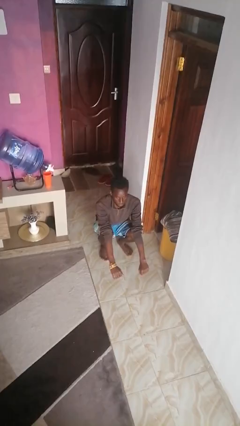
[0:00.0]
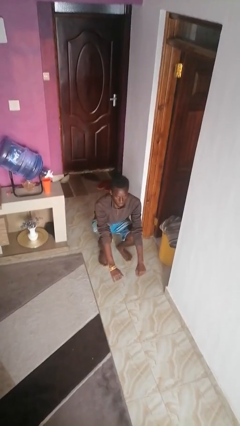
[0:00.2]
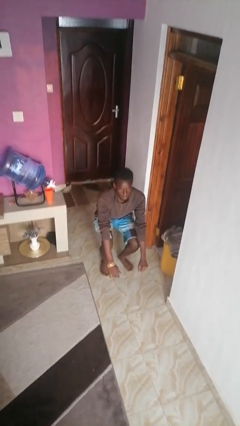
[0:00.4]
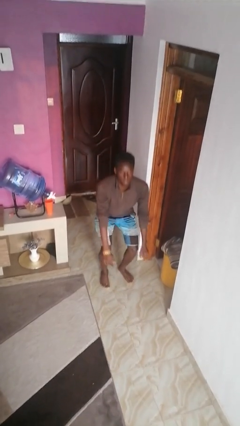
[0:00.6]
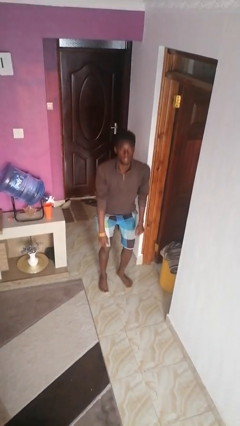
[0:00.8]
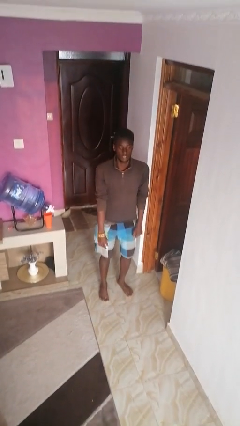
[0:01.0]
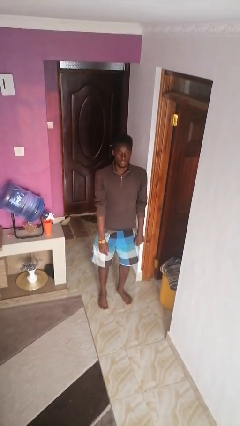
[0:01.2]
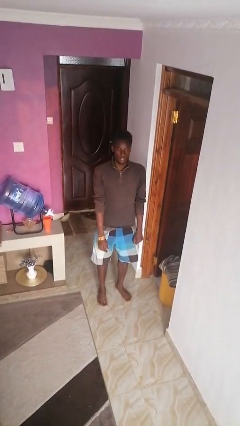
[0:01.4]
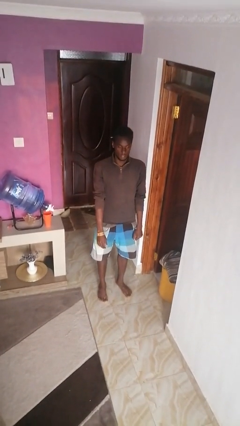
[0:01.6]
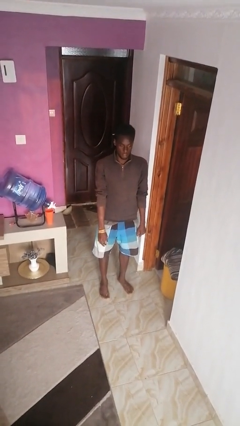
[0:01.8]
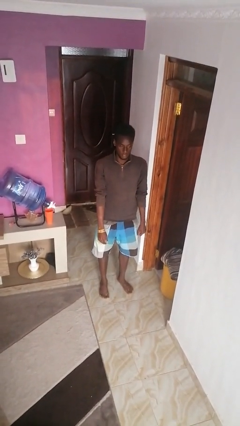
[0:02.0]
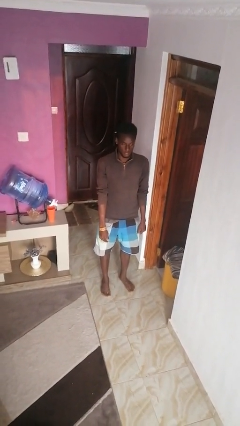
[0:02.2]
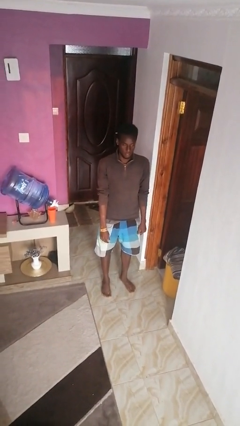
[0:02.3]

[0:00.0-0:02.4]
person stands up

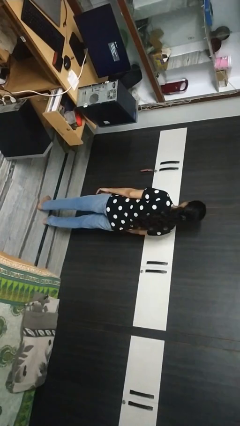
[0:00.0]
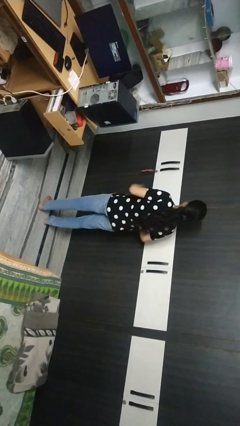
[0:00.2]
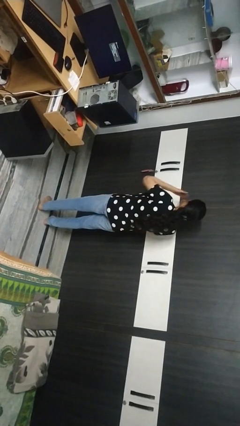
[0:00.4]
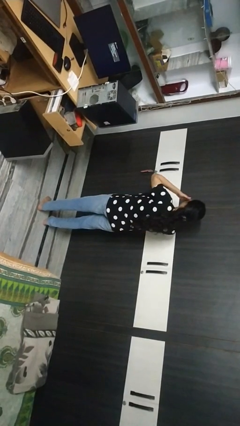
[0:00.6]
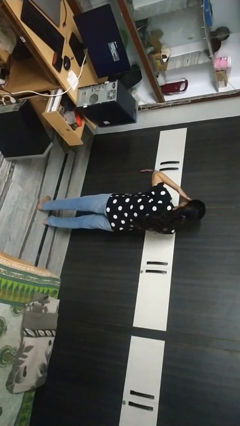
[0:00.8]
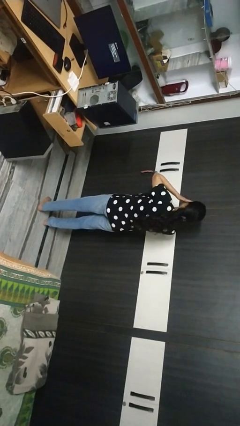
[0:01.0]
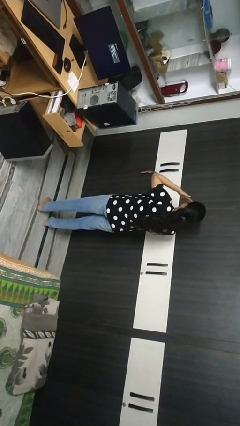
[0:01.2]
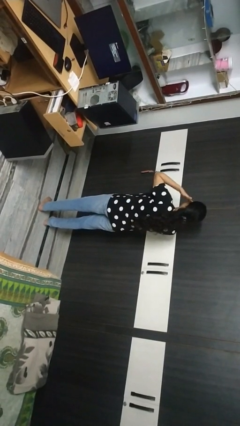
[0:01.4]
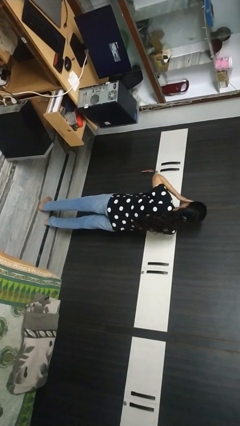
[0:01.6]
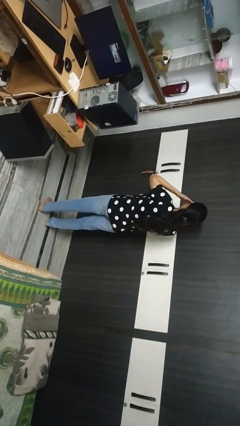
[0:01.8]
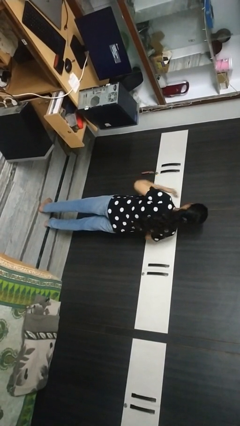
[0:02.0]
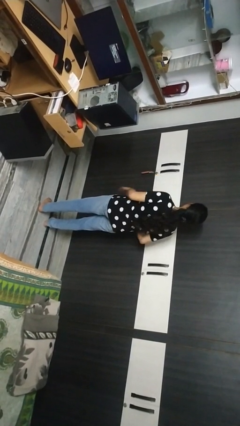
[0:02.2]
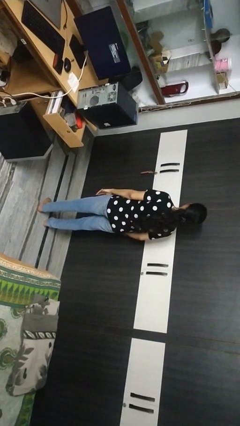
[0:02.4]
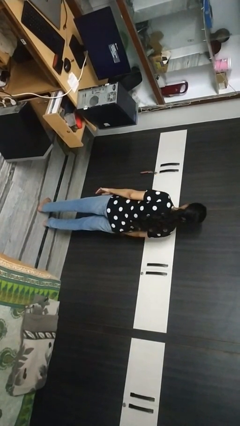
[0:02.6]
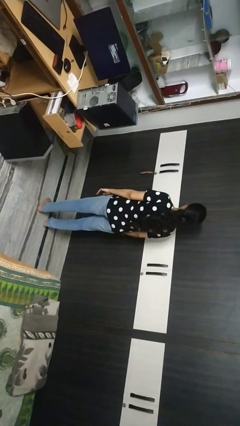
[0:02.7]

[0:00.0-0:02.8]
person rubs eyes

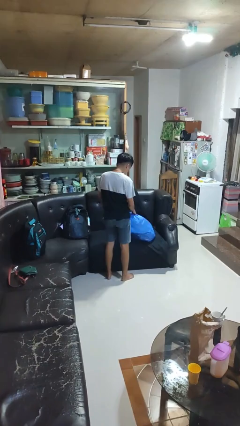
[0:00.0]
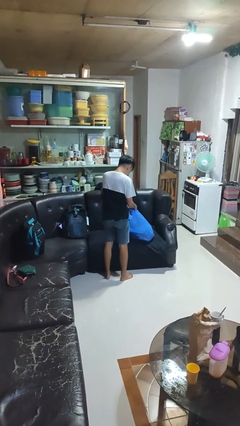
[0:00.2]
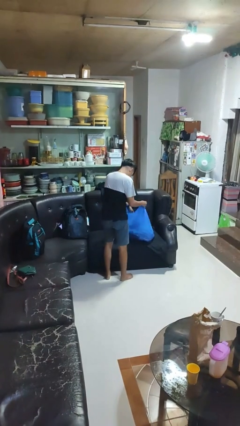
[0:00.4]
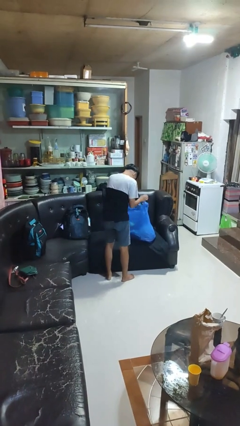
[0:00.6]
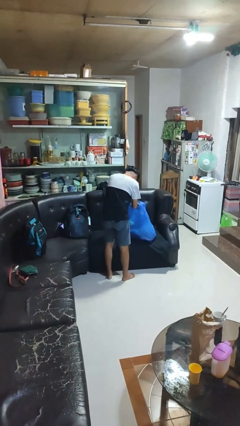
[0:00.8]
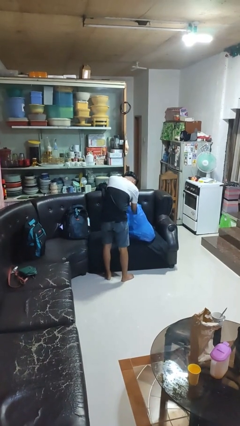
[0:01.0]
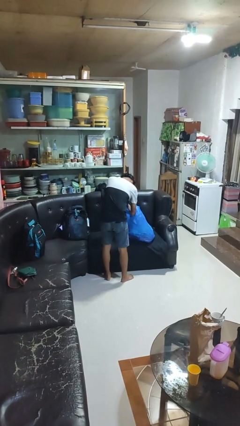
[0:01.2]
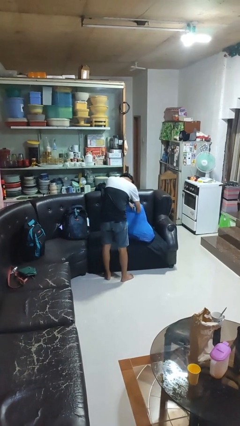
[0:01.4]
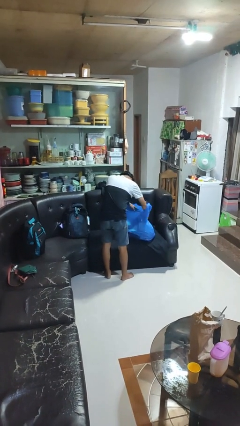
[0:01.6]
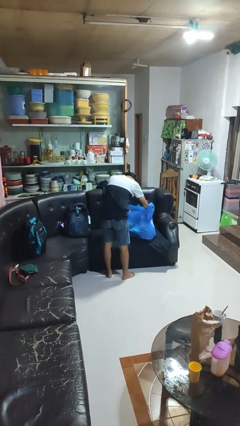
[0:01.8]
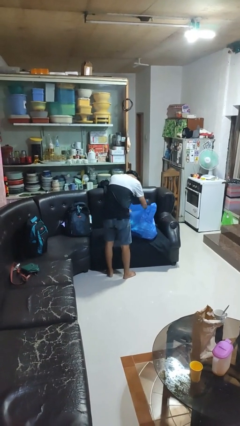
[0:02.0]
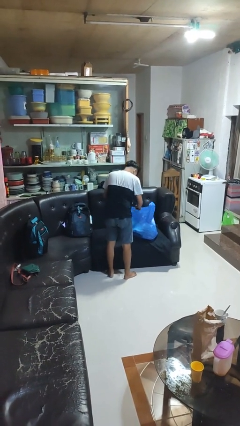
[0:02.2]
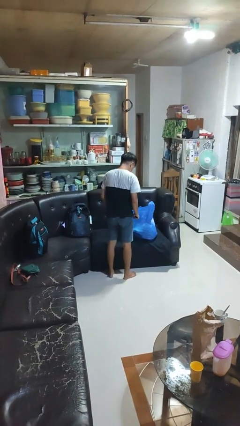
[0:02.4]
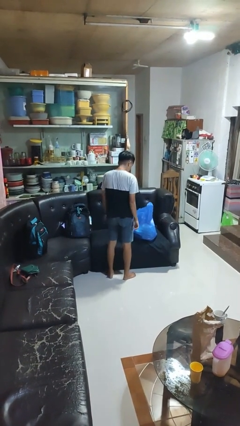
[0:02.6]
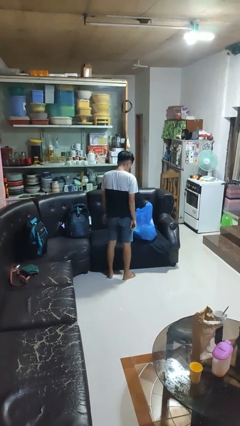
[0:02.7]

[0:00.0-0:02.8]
person searches in bag

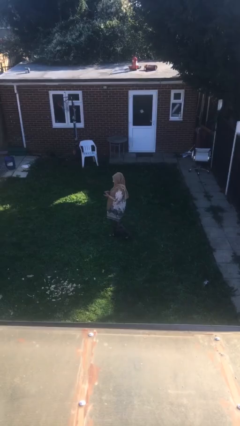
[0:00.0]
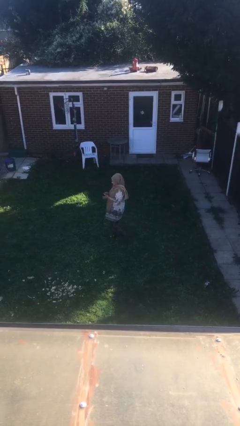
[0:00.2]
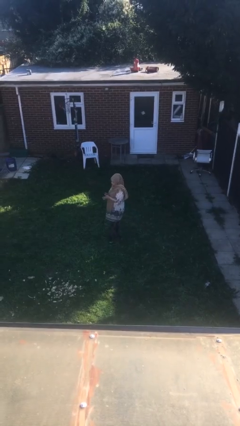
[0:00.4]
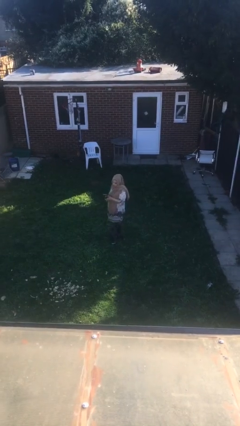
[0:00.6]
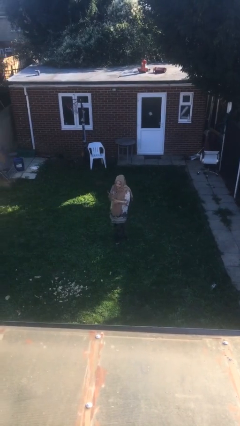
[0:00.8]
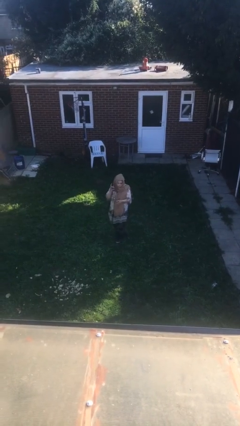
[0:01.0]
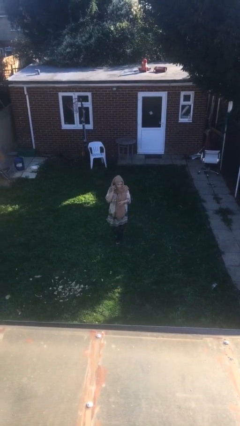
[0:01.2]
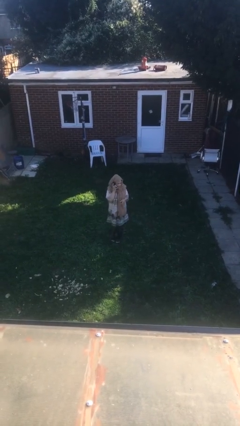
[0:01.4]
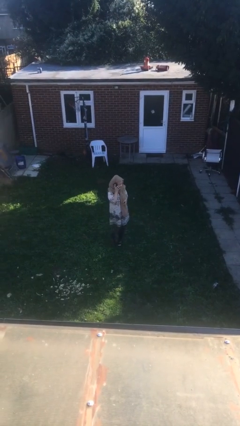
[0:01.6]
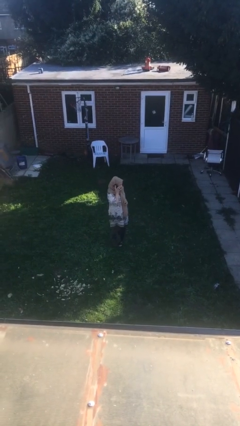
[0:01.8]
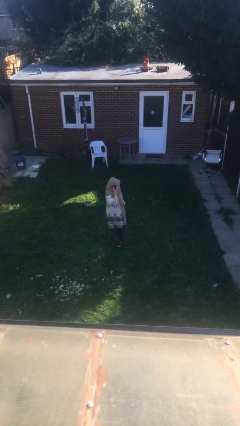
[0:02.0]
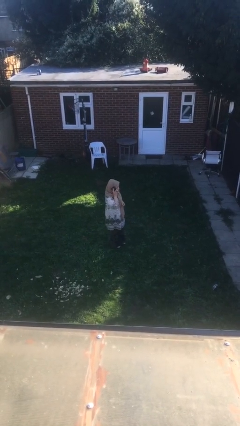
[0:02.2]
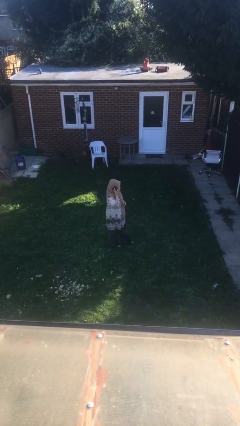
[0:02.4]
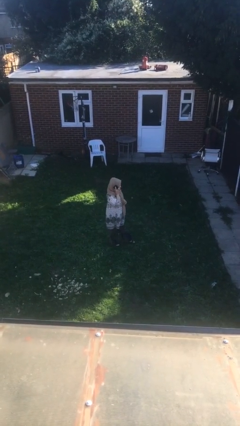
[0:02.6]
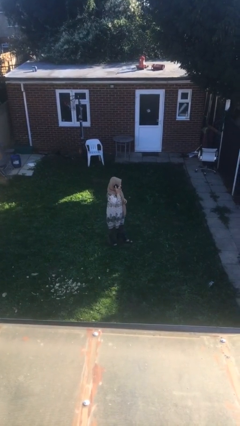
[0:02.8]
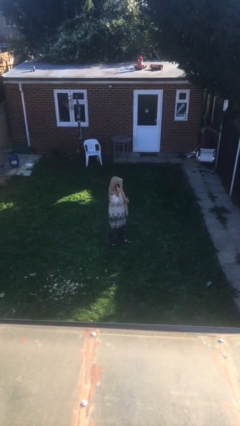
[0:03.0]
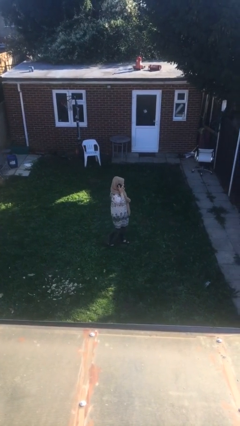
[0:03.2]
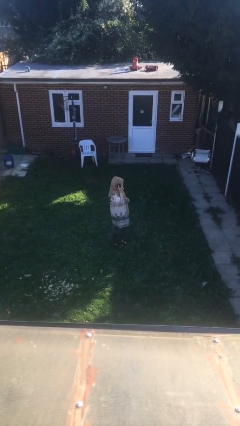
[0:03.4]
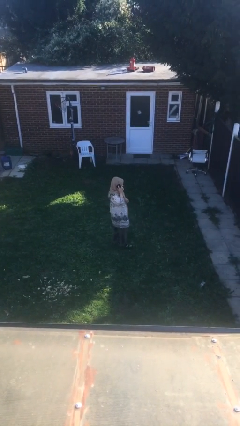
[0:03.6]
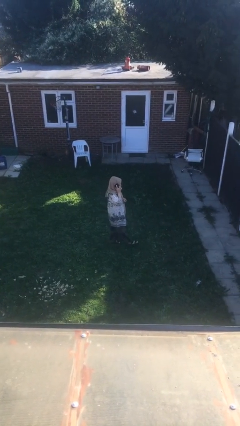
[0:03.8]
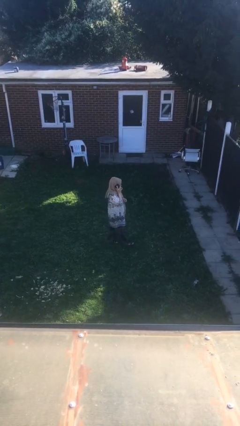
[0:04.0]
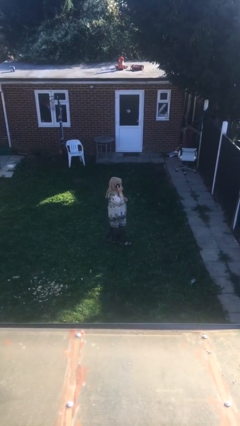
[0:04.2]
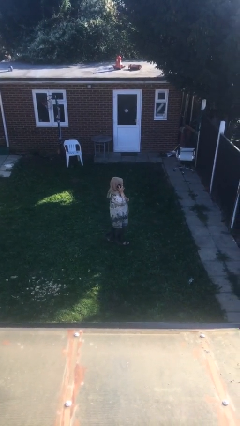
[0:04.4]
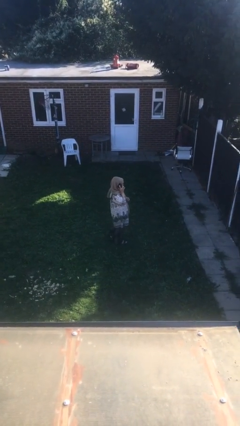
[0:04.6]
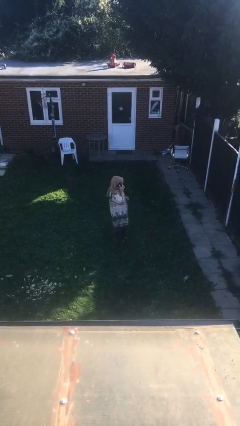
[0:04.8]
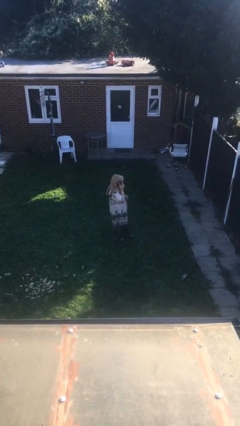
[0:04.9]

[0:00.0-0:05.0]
person talks on phone

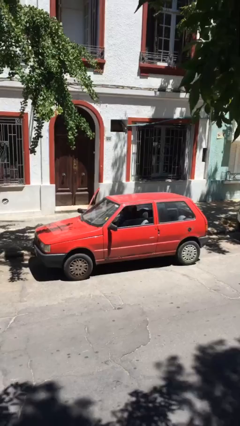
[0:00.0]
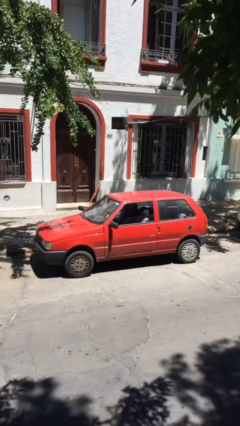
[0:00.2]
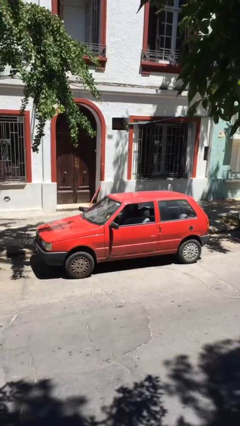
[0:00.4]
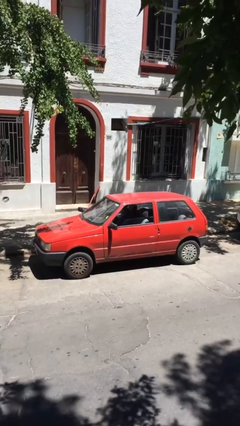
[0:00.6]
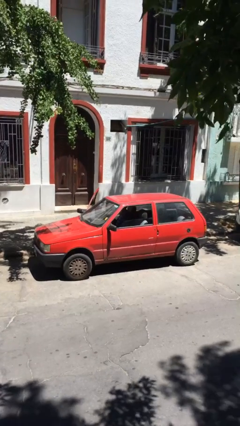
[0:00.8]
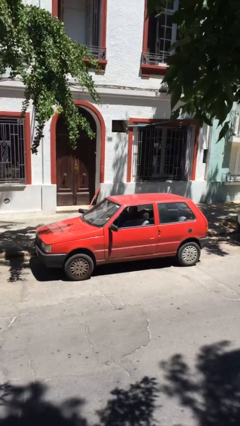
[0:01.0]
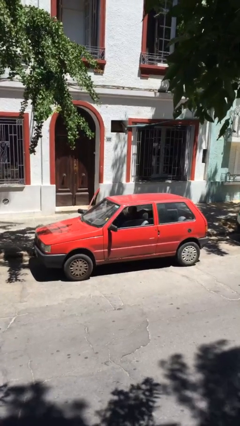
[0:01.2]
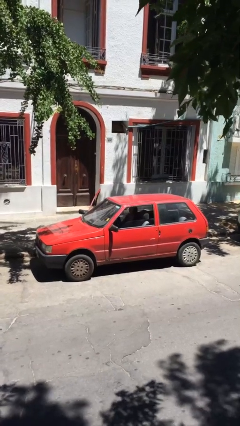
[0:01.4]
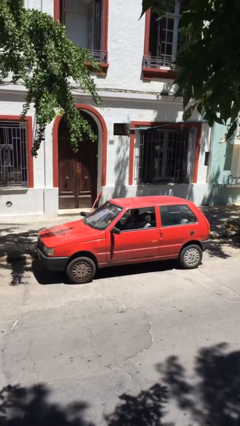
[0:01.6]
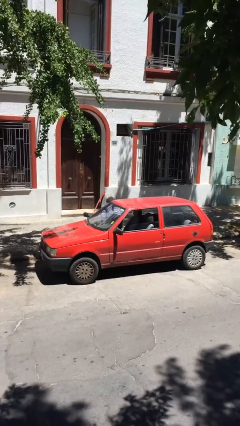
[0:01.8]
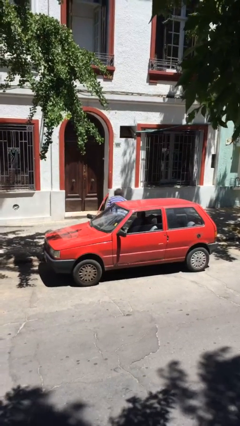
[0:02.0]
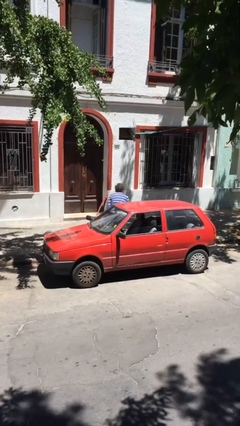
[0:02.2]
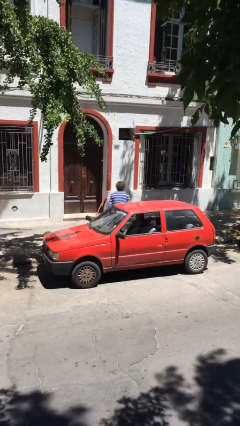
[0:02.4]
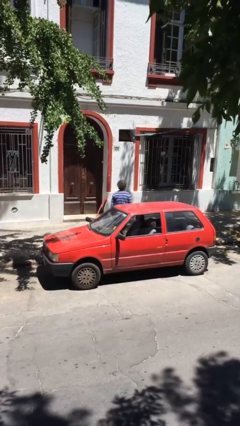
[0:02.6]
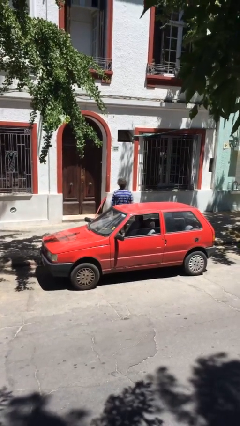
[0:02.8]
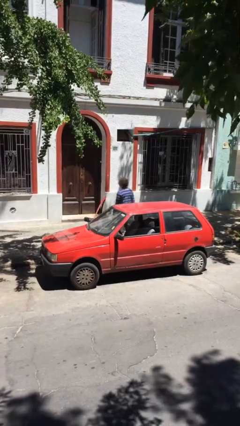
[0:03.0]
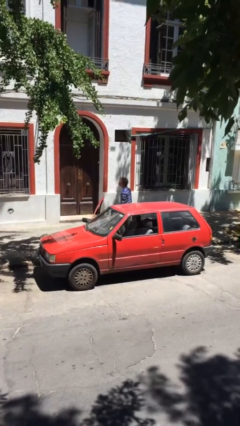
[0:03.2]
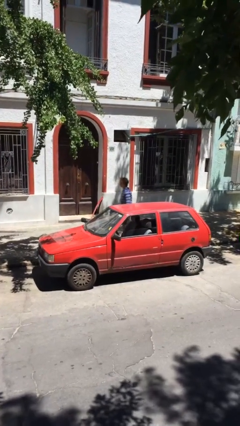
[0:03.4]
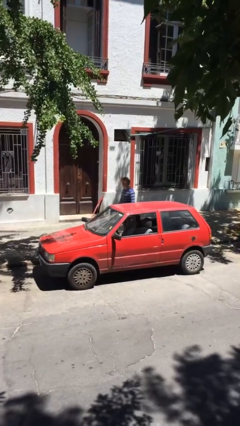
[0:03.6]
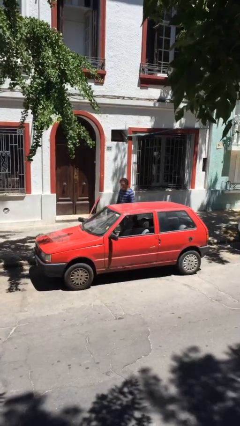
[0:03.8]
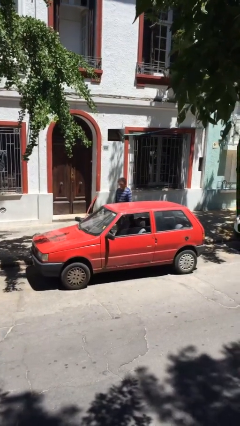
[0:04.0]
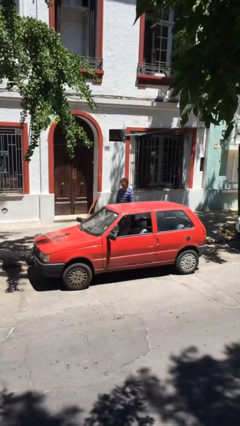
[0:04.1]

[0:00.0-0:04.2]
person exits car
